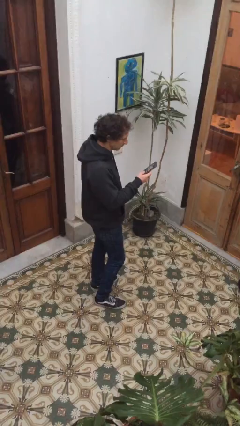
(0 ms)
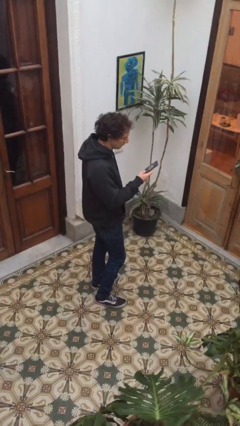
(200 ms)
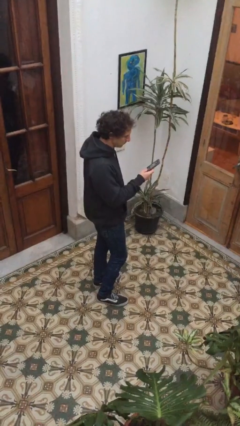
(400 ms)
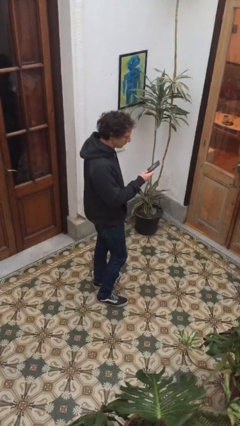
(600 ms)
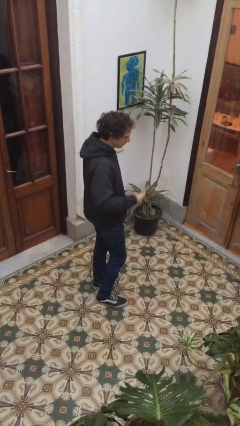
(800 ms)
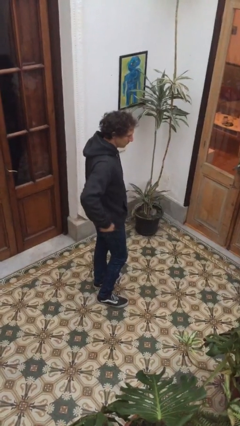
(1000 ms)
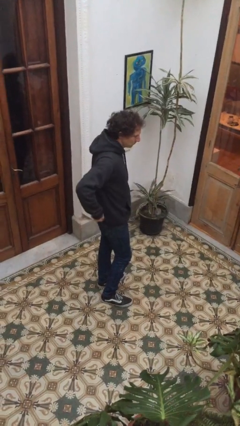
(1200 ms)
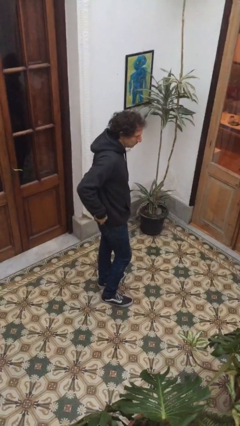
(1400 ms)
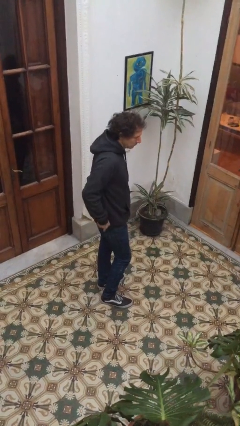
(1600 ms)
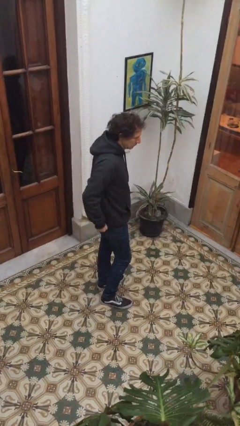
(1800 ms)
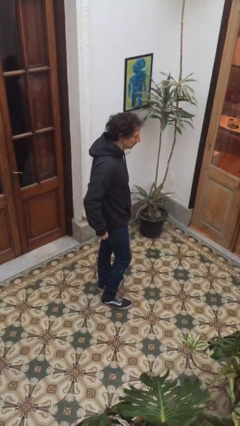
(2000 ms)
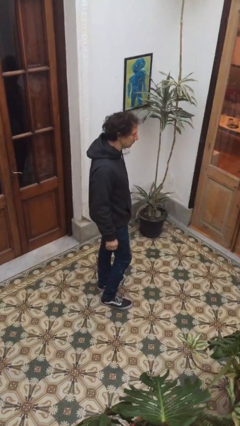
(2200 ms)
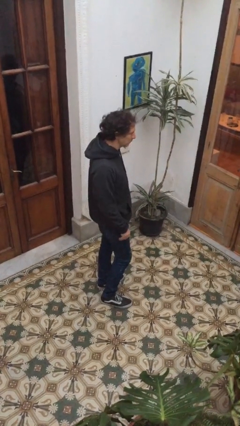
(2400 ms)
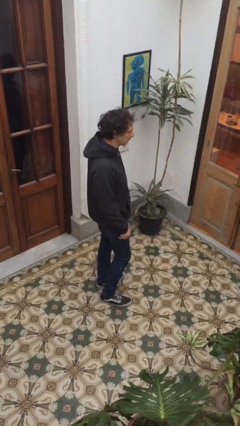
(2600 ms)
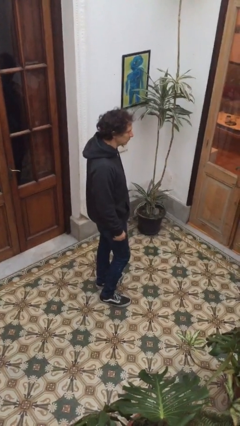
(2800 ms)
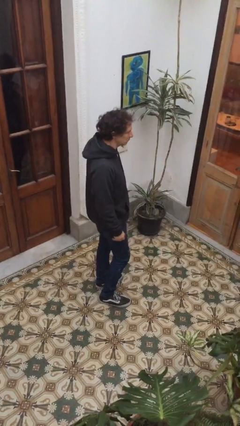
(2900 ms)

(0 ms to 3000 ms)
person puts phone into pocket

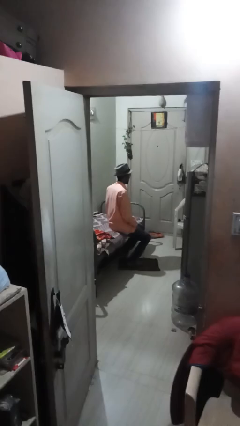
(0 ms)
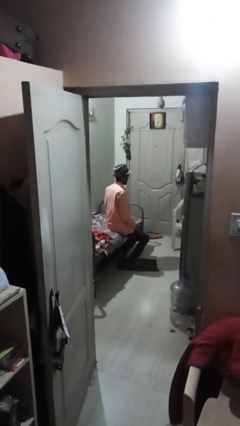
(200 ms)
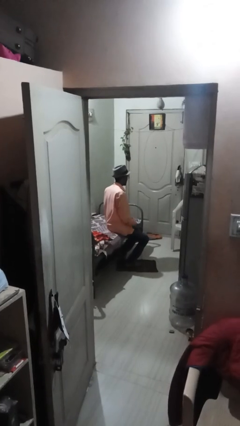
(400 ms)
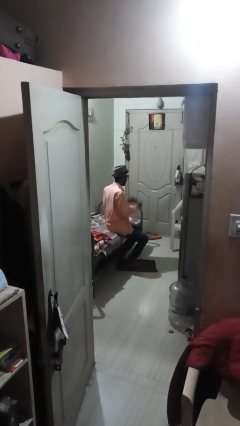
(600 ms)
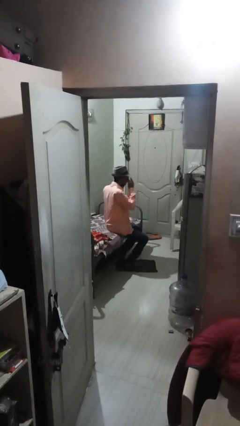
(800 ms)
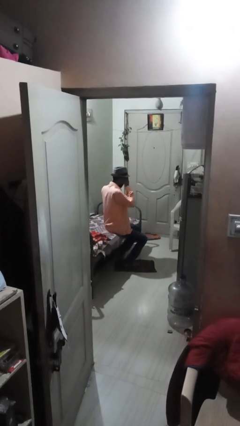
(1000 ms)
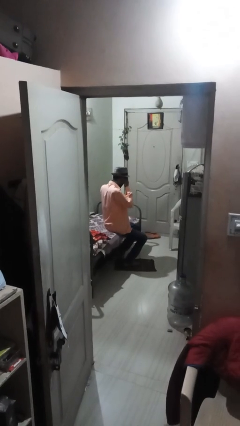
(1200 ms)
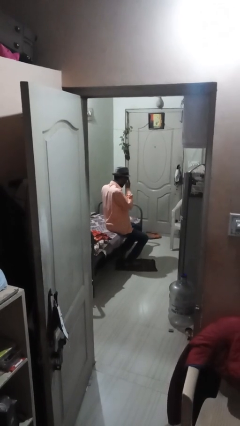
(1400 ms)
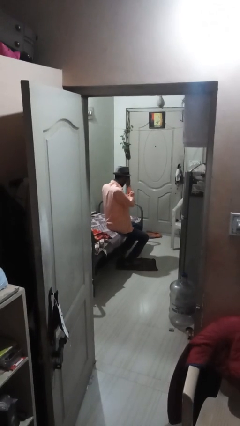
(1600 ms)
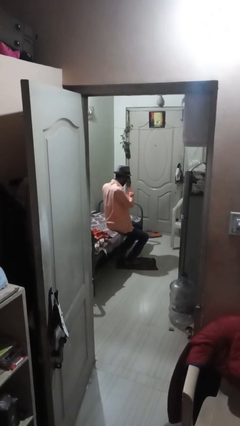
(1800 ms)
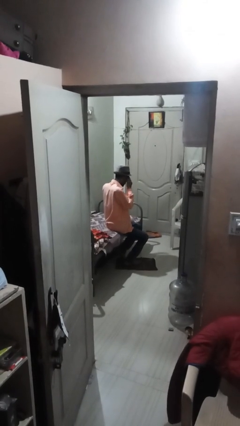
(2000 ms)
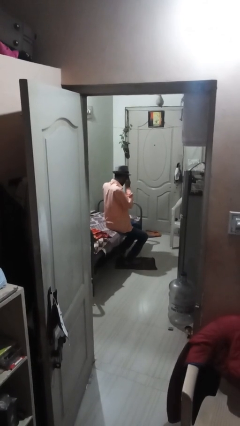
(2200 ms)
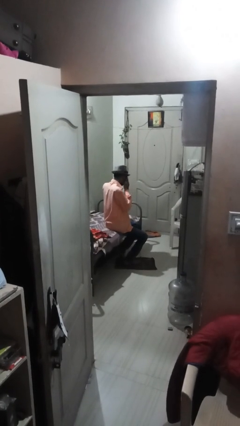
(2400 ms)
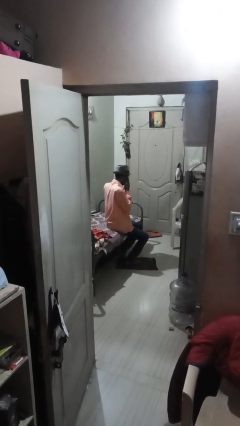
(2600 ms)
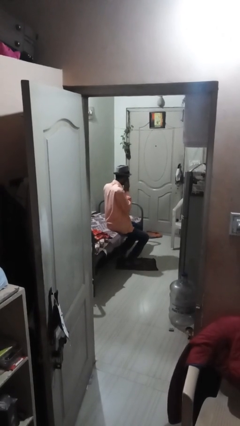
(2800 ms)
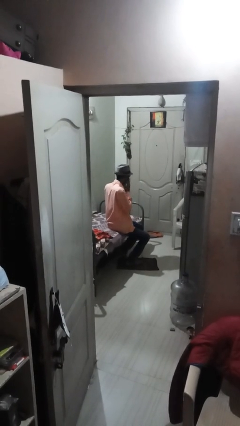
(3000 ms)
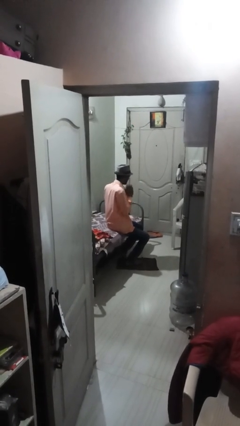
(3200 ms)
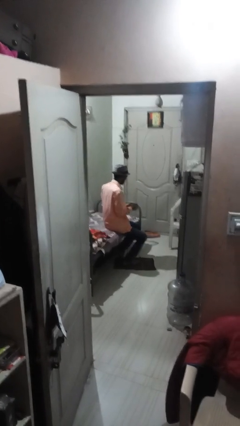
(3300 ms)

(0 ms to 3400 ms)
person covers face with hands

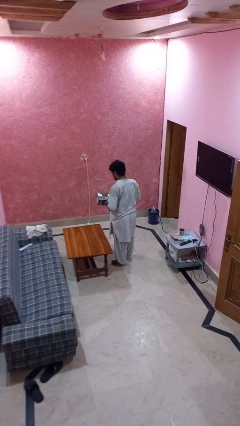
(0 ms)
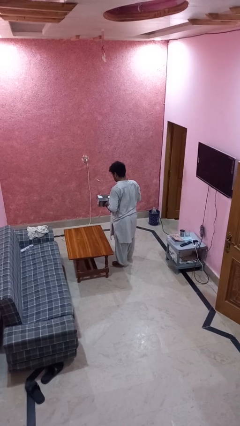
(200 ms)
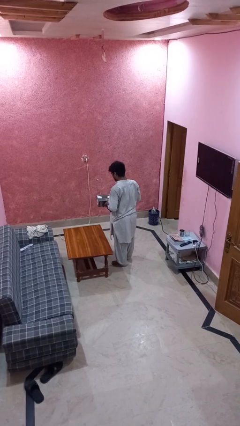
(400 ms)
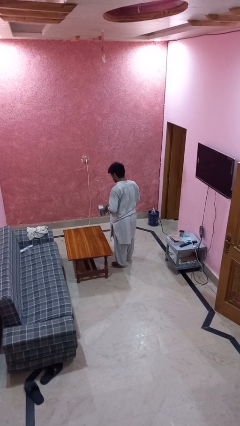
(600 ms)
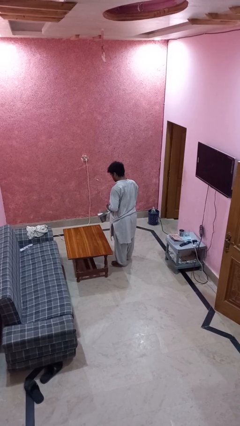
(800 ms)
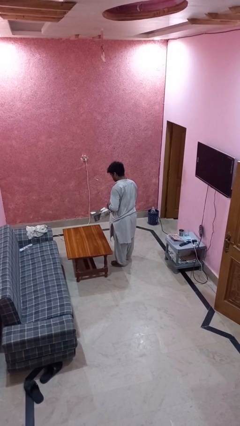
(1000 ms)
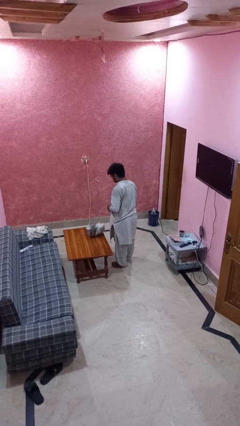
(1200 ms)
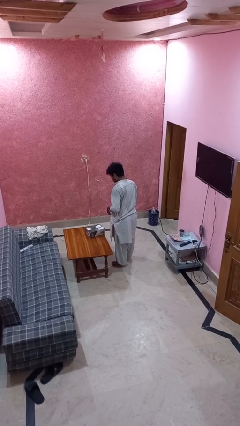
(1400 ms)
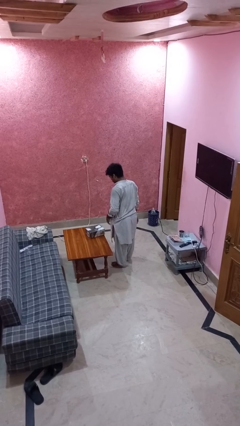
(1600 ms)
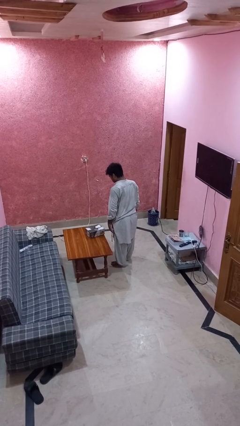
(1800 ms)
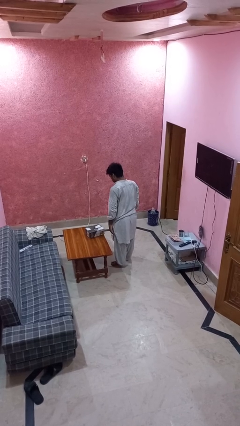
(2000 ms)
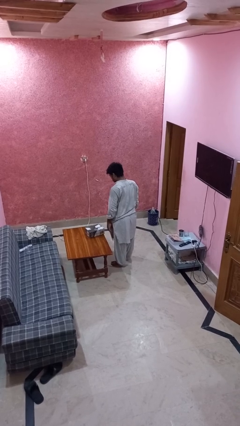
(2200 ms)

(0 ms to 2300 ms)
person throws object on table

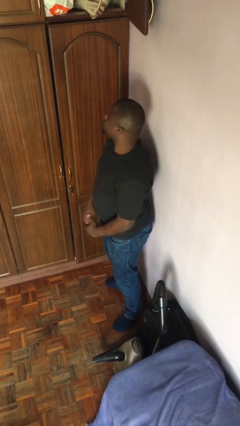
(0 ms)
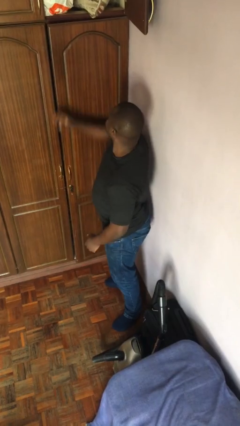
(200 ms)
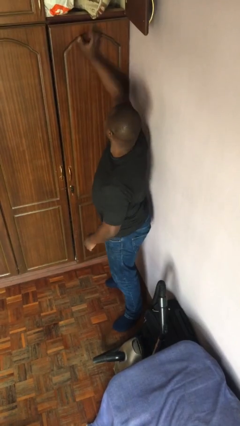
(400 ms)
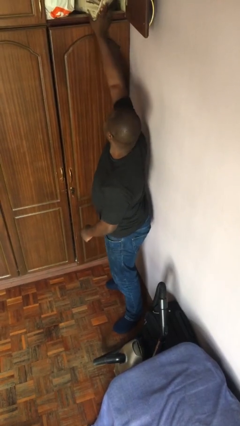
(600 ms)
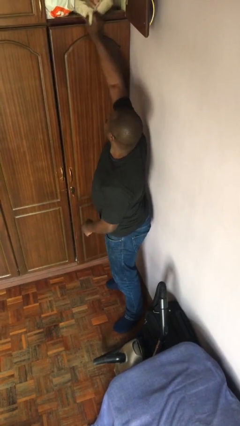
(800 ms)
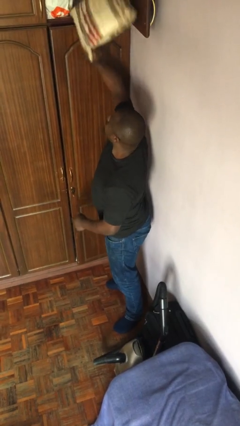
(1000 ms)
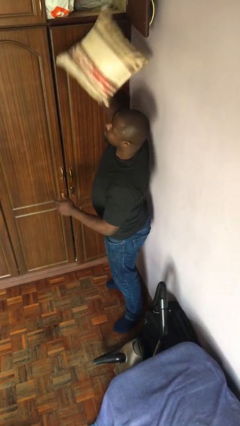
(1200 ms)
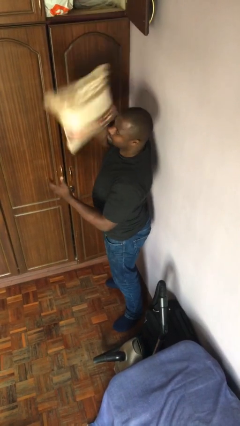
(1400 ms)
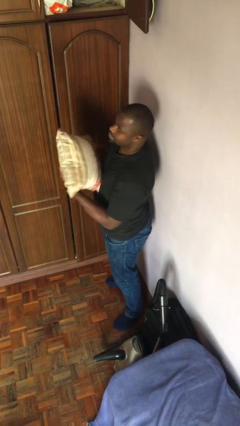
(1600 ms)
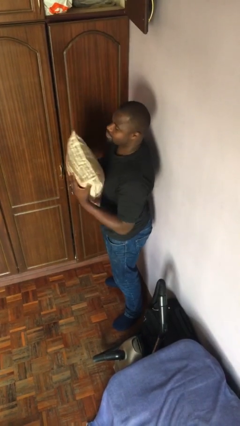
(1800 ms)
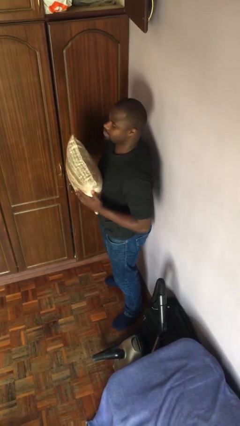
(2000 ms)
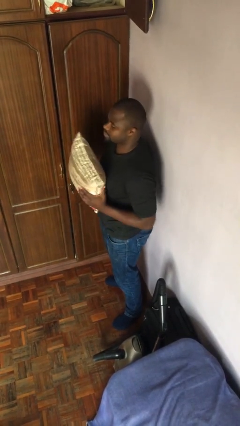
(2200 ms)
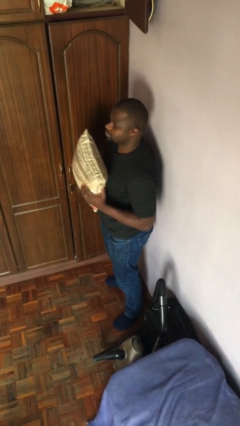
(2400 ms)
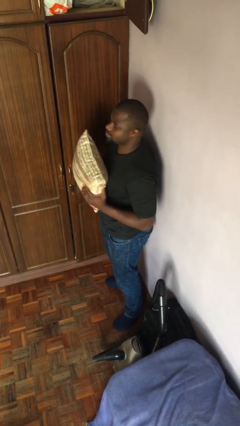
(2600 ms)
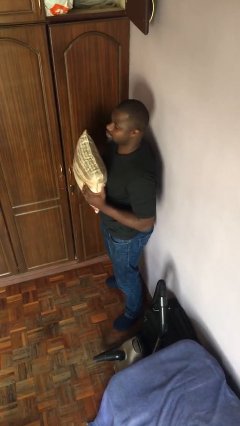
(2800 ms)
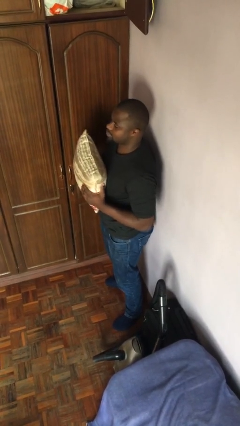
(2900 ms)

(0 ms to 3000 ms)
person picks up object from shelf

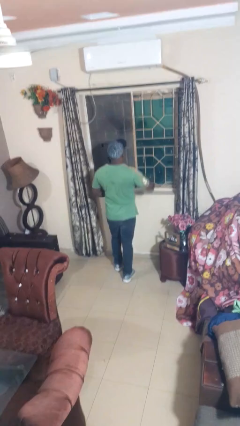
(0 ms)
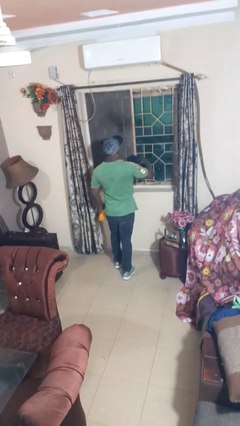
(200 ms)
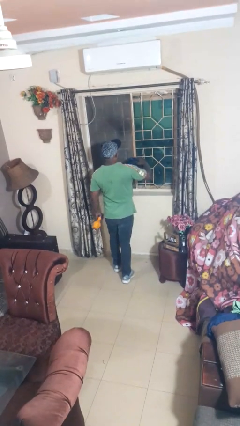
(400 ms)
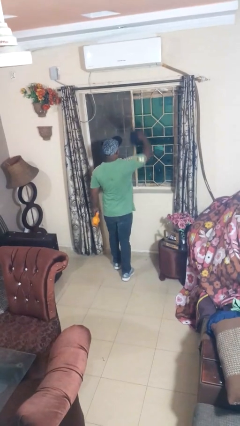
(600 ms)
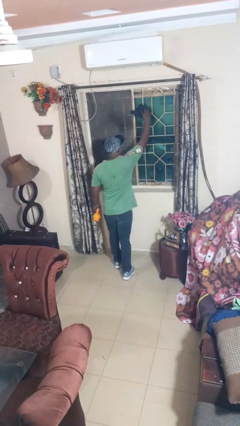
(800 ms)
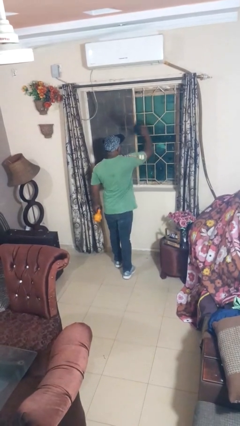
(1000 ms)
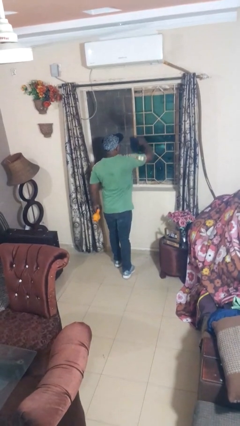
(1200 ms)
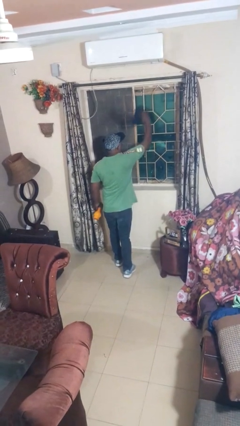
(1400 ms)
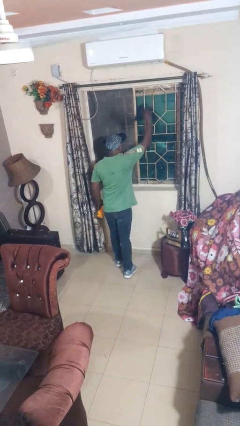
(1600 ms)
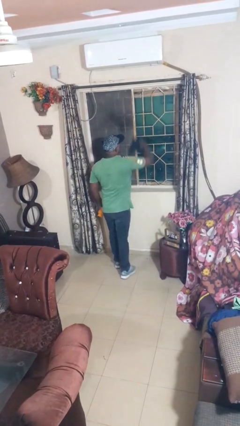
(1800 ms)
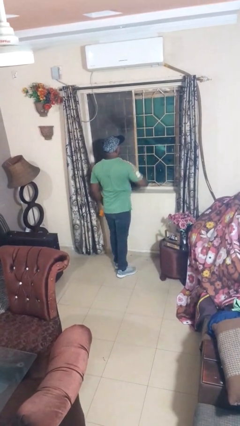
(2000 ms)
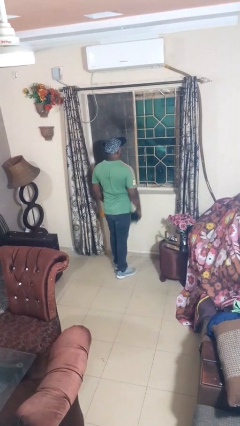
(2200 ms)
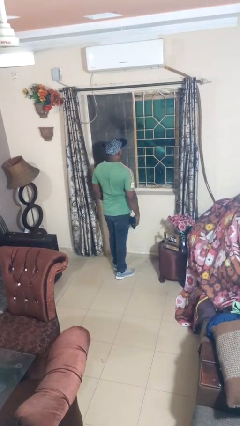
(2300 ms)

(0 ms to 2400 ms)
person washes window

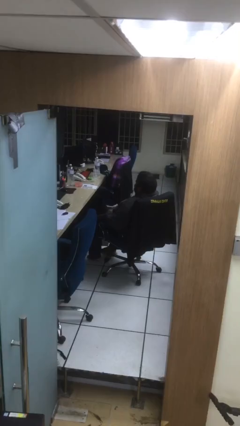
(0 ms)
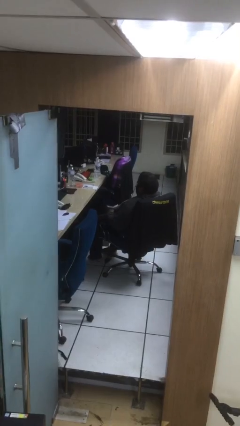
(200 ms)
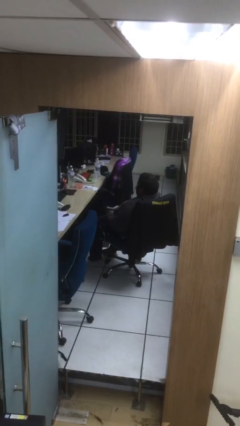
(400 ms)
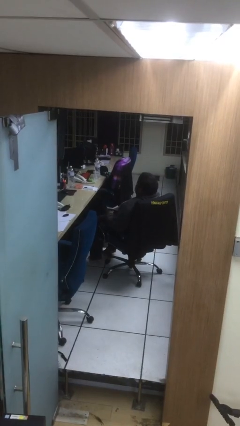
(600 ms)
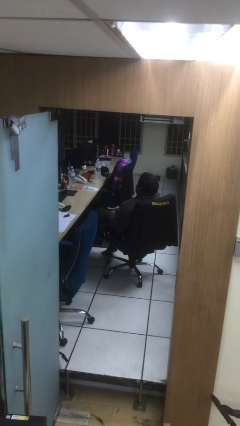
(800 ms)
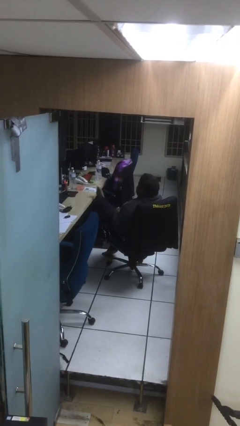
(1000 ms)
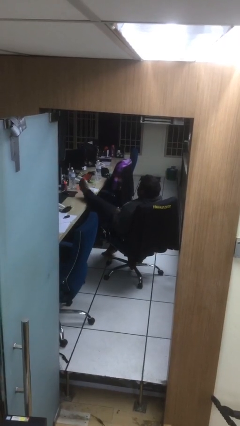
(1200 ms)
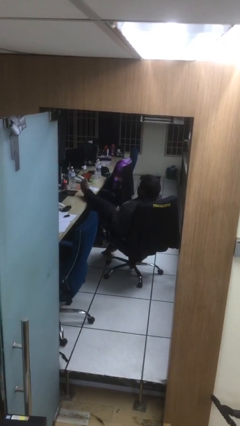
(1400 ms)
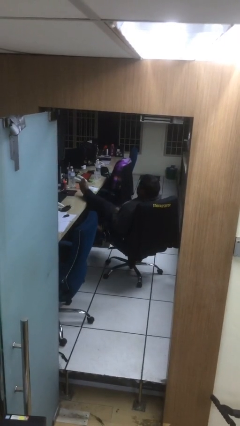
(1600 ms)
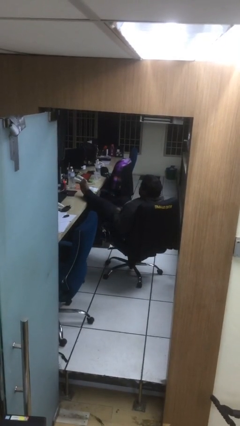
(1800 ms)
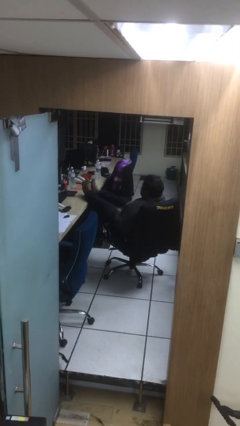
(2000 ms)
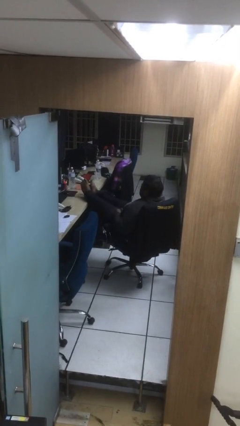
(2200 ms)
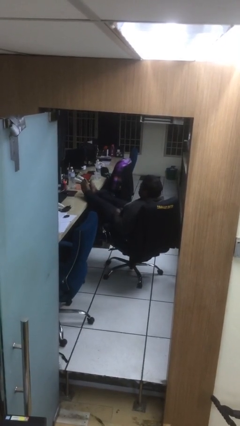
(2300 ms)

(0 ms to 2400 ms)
person puts feet up

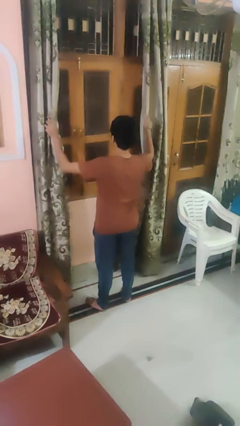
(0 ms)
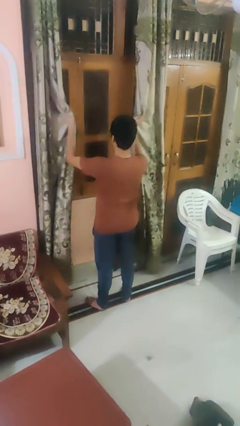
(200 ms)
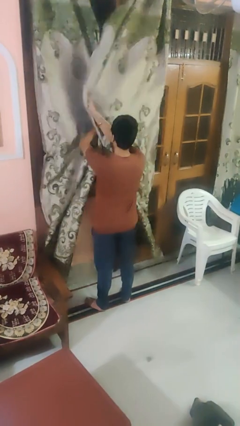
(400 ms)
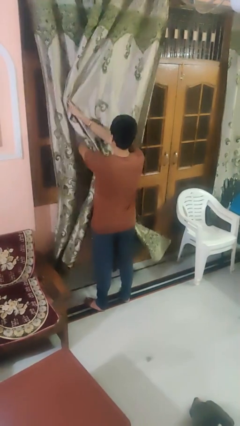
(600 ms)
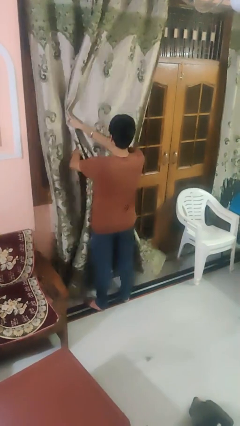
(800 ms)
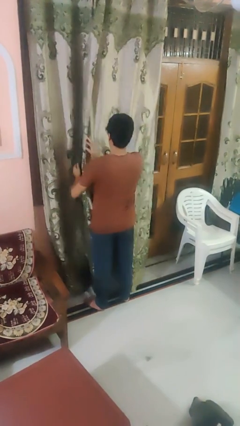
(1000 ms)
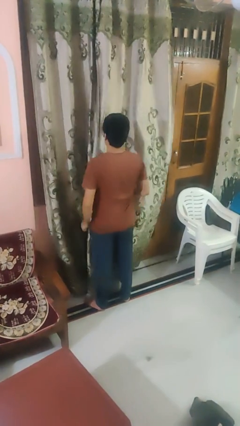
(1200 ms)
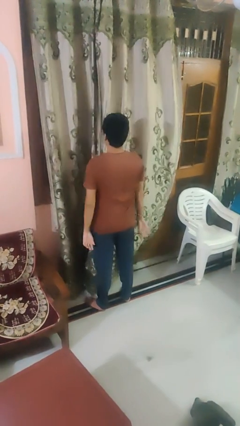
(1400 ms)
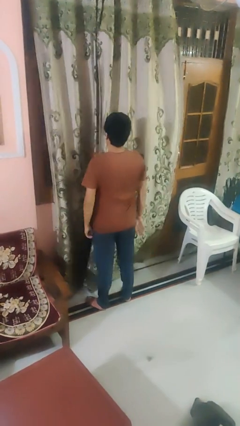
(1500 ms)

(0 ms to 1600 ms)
person closes curtains
